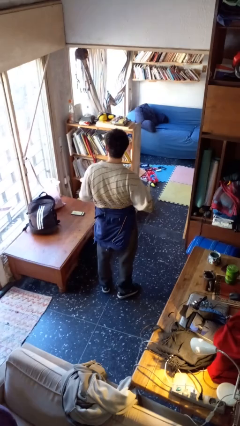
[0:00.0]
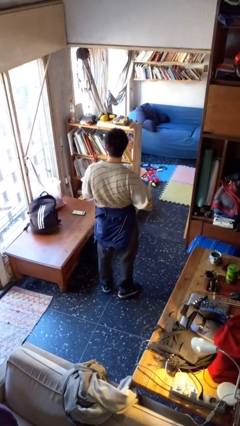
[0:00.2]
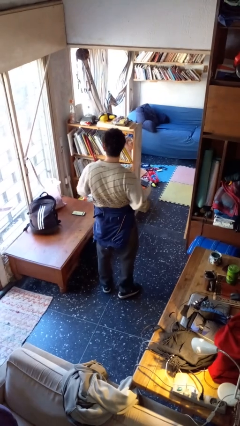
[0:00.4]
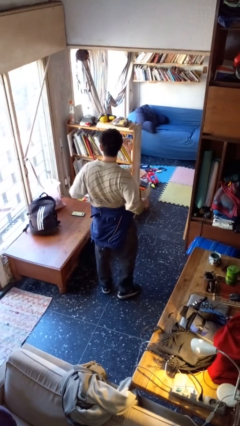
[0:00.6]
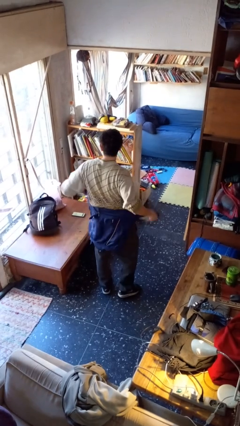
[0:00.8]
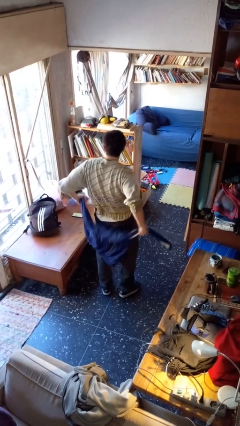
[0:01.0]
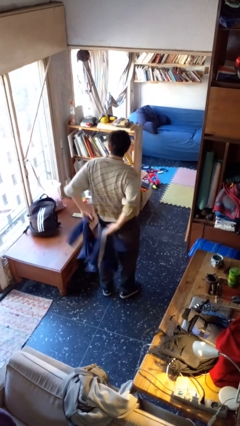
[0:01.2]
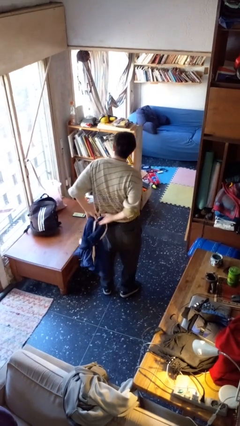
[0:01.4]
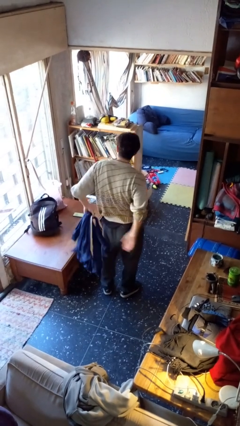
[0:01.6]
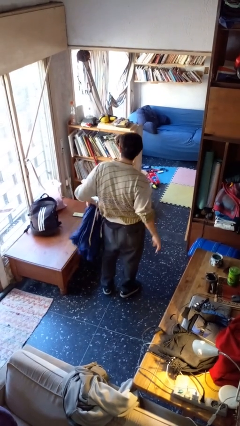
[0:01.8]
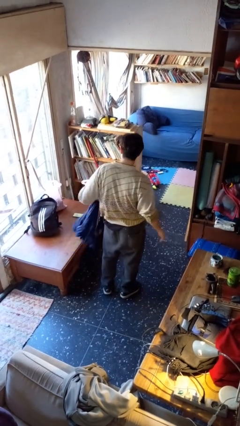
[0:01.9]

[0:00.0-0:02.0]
person unties jacket around waist

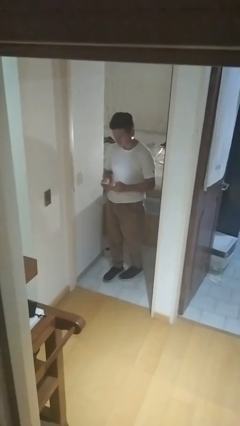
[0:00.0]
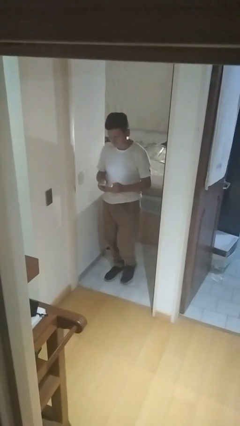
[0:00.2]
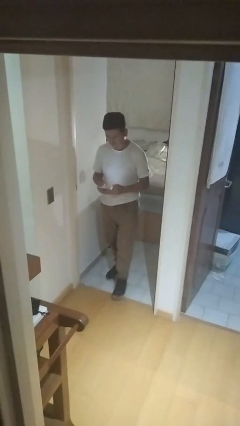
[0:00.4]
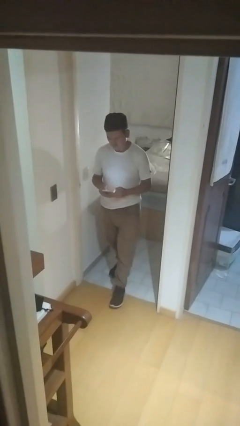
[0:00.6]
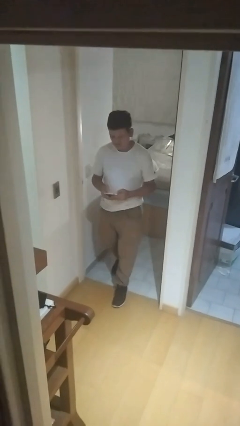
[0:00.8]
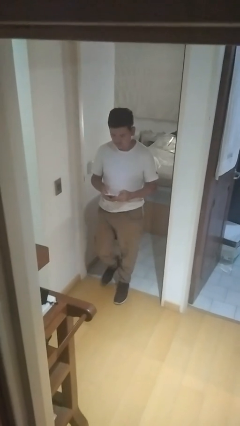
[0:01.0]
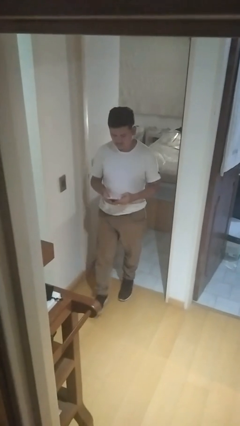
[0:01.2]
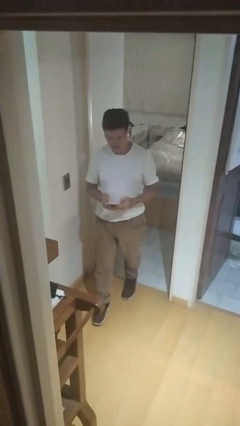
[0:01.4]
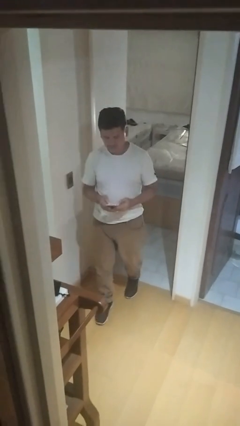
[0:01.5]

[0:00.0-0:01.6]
person enters scene through structure

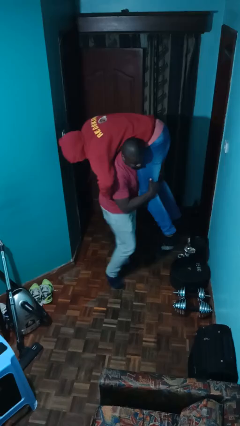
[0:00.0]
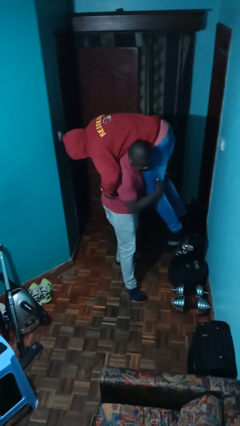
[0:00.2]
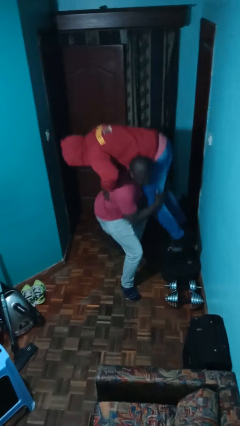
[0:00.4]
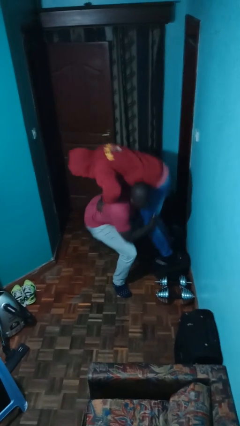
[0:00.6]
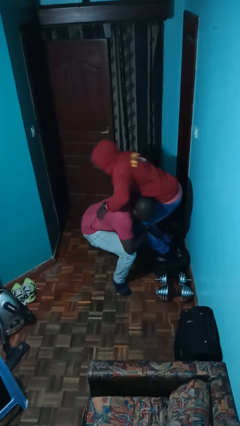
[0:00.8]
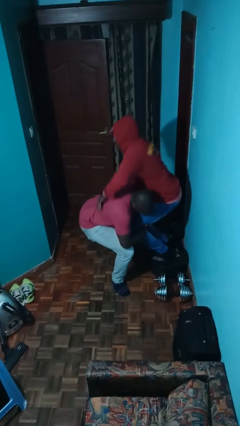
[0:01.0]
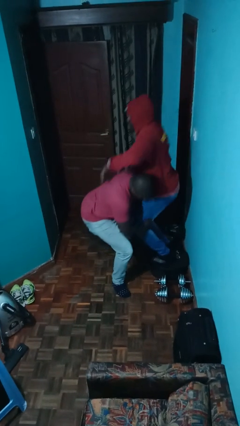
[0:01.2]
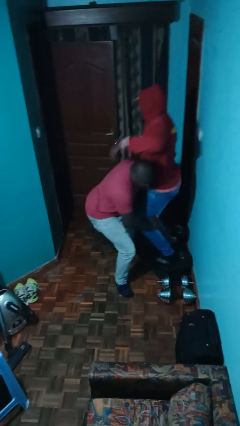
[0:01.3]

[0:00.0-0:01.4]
person puts down person

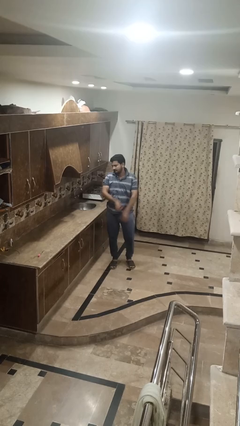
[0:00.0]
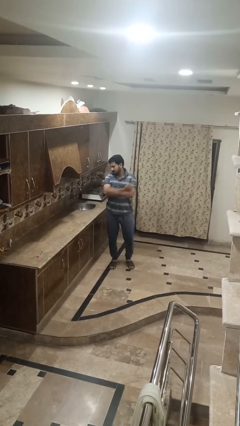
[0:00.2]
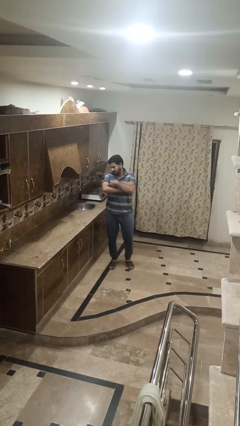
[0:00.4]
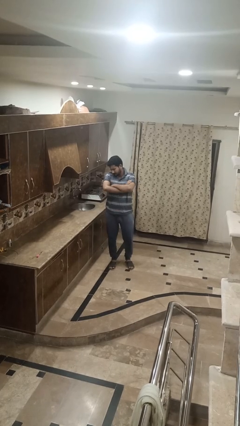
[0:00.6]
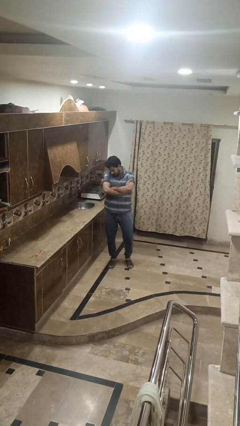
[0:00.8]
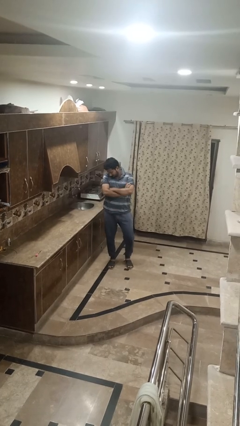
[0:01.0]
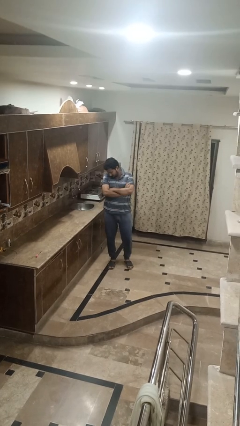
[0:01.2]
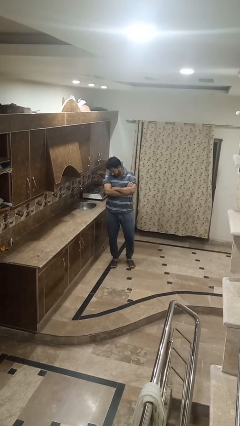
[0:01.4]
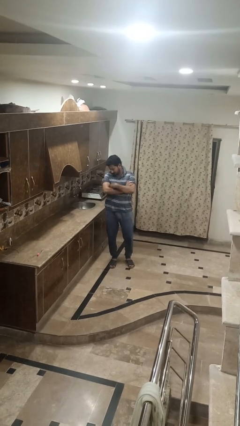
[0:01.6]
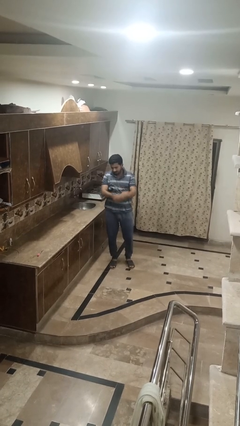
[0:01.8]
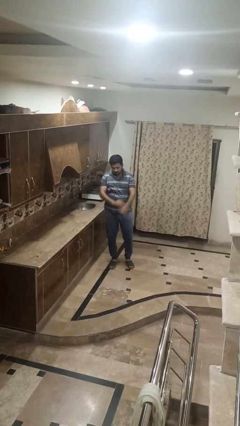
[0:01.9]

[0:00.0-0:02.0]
person crosses arms

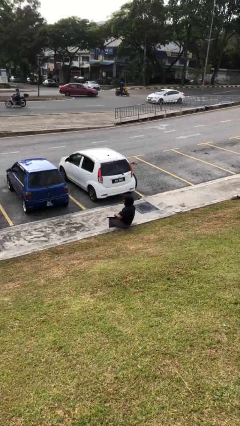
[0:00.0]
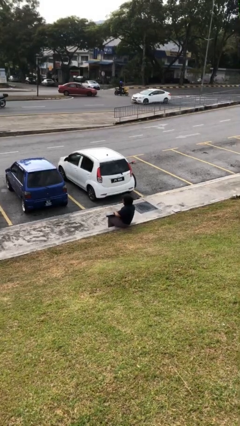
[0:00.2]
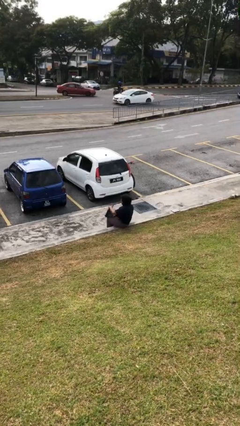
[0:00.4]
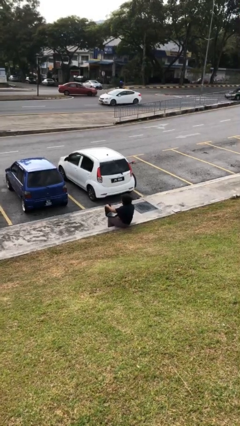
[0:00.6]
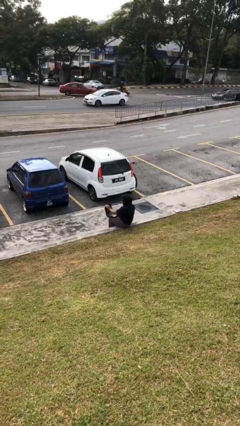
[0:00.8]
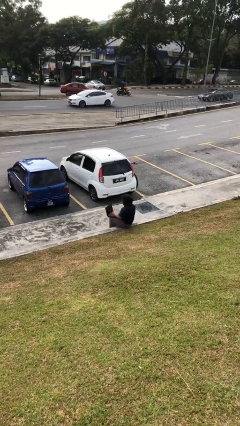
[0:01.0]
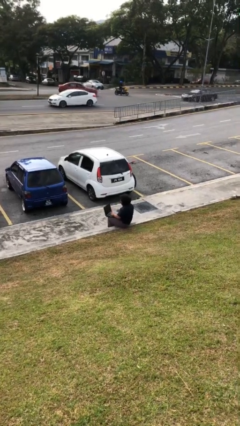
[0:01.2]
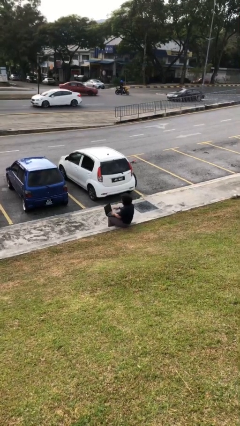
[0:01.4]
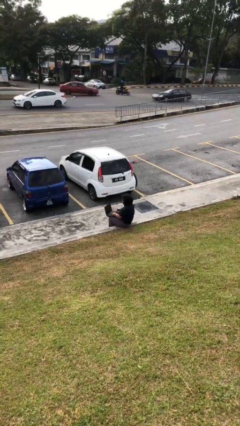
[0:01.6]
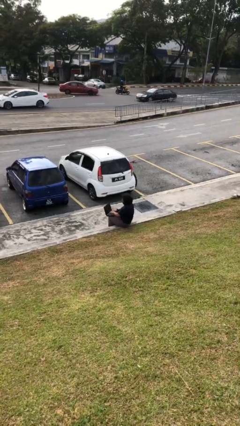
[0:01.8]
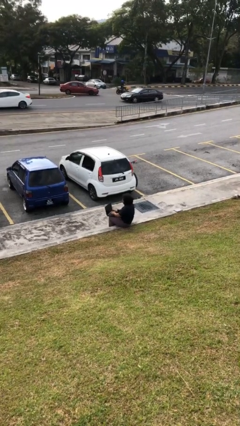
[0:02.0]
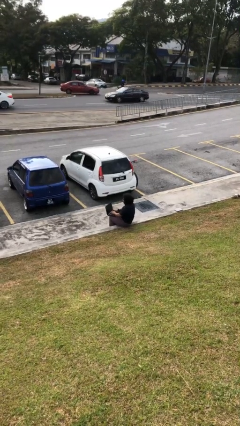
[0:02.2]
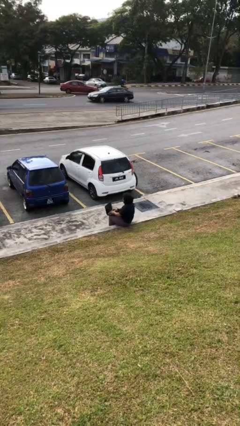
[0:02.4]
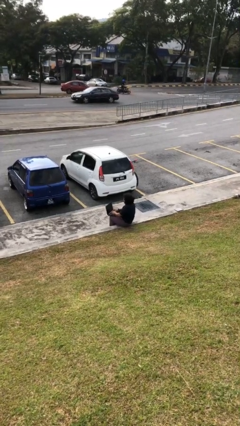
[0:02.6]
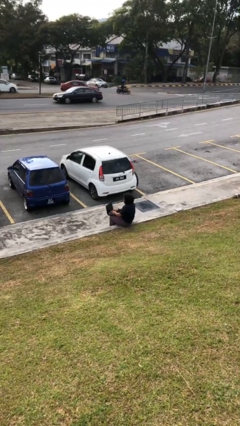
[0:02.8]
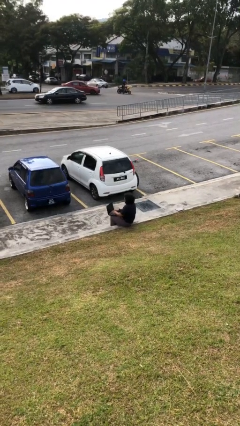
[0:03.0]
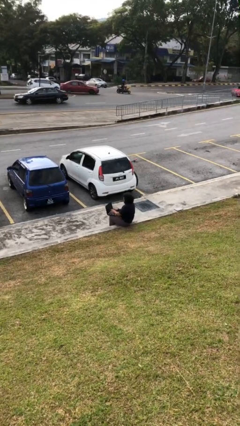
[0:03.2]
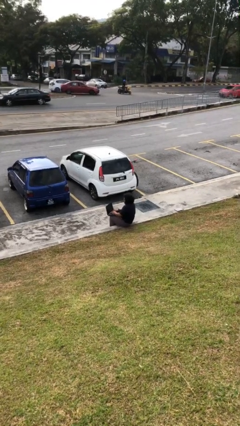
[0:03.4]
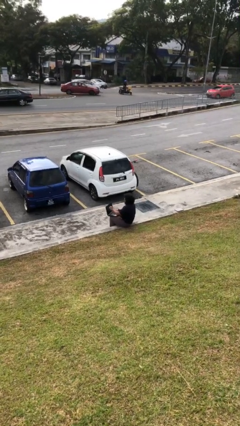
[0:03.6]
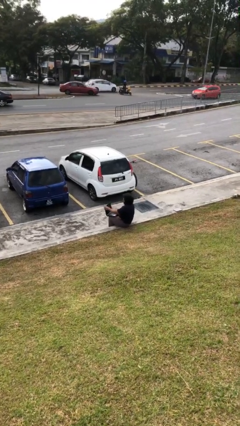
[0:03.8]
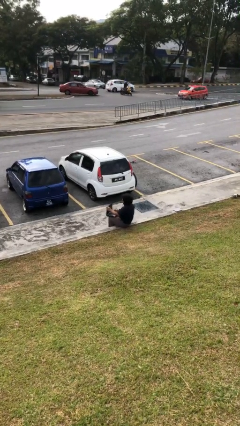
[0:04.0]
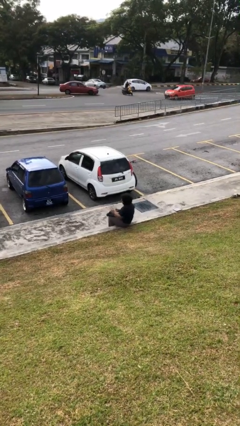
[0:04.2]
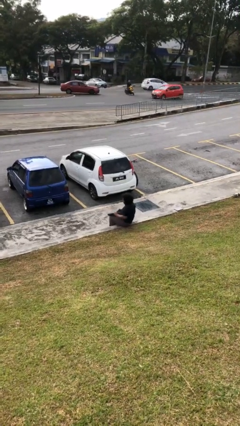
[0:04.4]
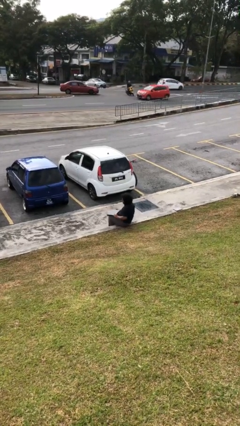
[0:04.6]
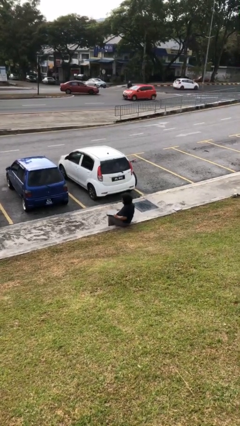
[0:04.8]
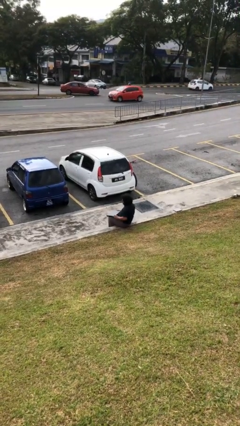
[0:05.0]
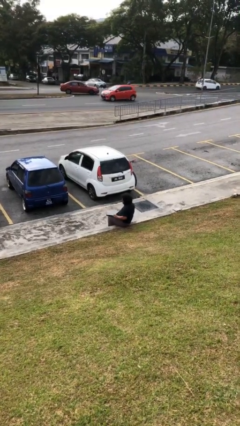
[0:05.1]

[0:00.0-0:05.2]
person interacts with laptop

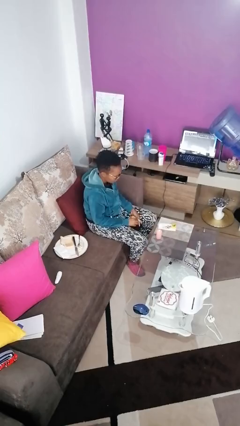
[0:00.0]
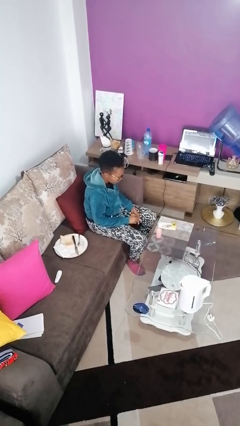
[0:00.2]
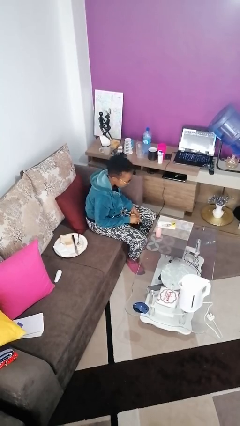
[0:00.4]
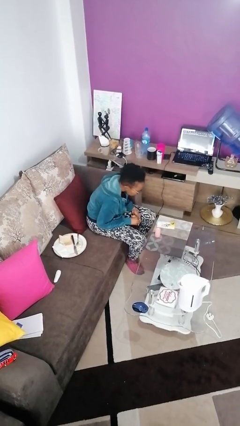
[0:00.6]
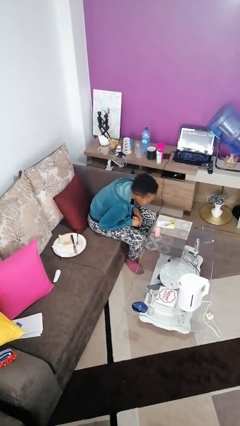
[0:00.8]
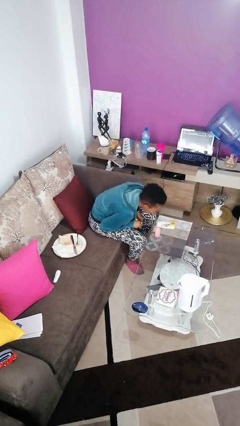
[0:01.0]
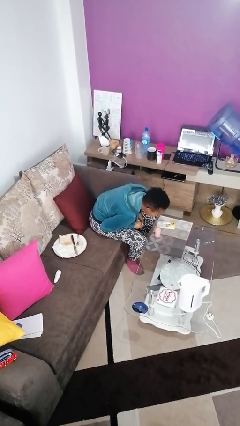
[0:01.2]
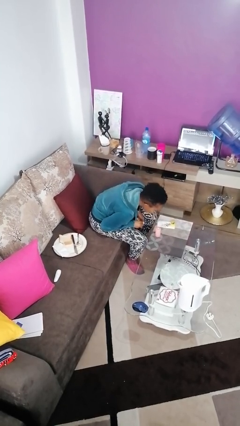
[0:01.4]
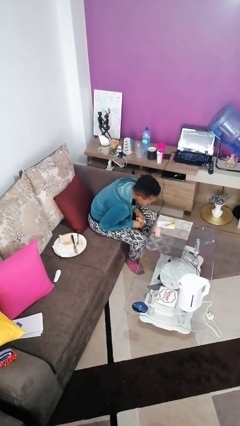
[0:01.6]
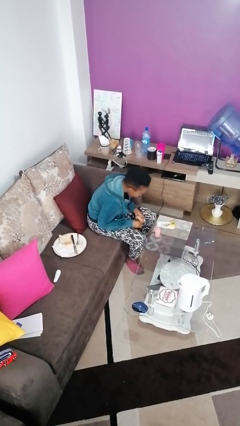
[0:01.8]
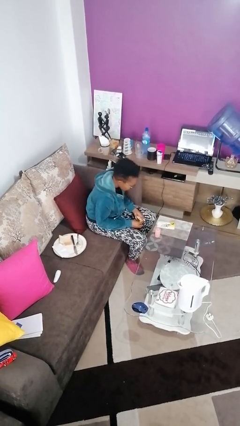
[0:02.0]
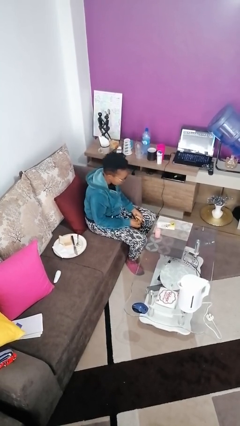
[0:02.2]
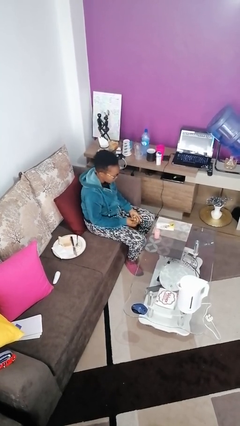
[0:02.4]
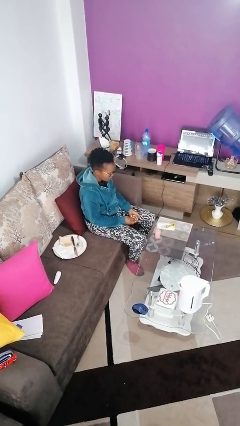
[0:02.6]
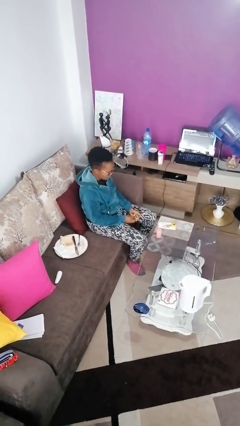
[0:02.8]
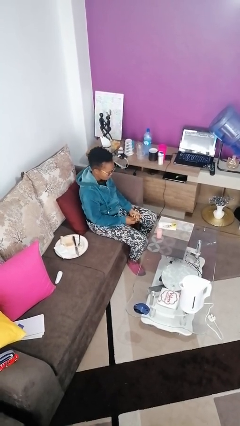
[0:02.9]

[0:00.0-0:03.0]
person extinguishes candle

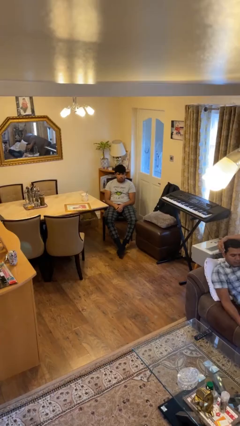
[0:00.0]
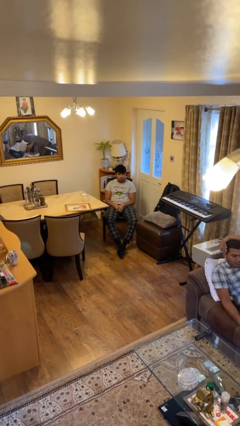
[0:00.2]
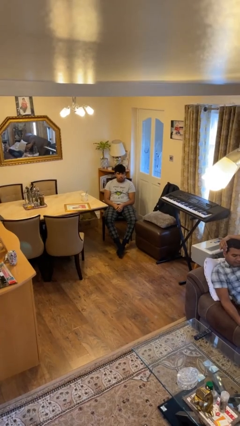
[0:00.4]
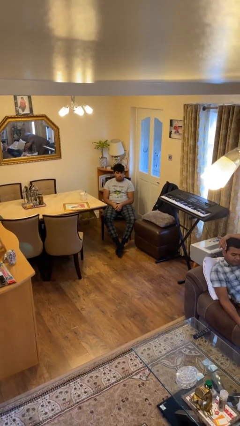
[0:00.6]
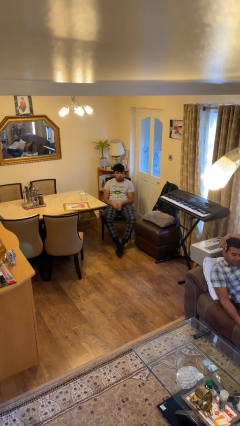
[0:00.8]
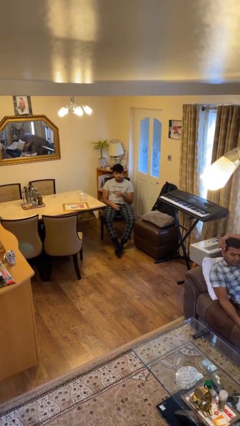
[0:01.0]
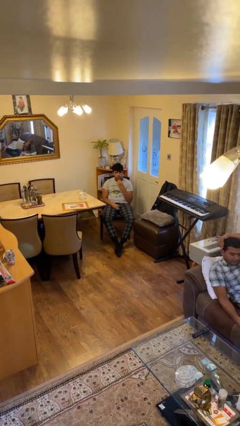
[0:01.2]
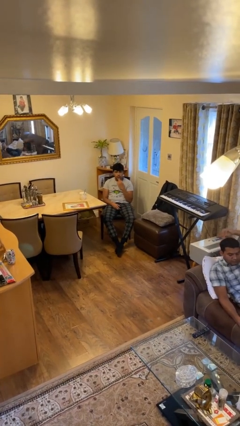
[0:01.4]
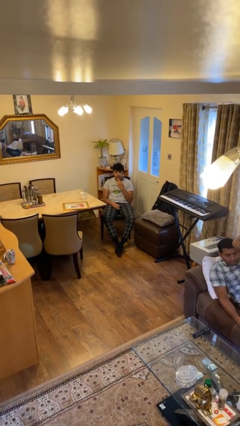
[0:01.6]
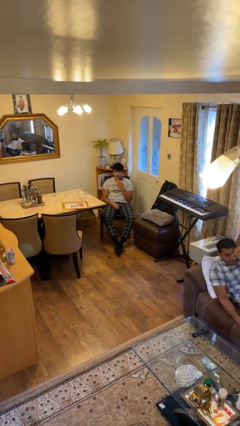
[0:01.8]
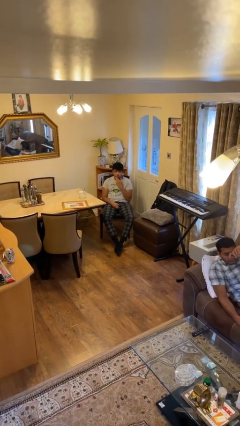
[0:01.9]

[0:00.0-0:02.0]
person strokes chin

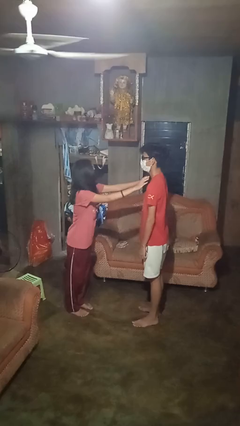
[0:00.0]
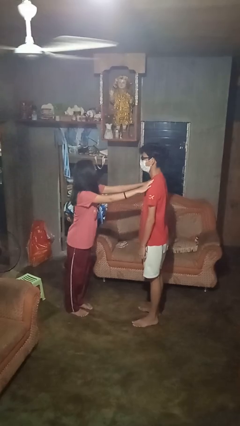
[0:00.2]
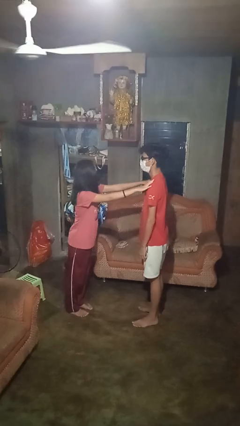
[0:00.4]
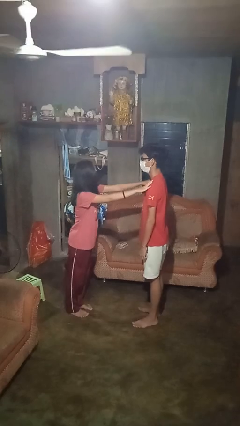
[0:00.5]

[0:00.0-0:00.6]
person pounds shoulders of person
